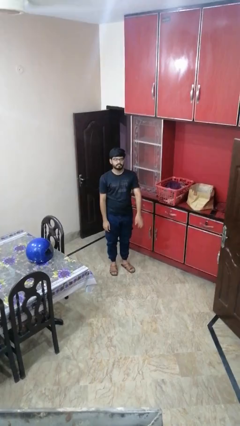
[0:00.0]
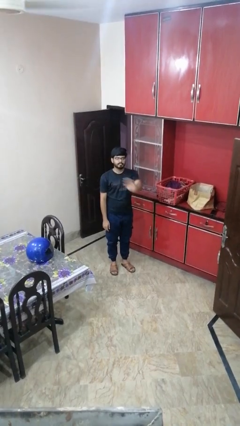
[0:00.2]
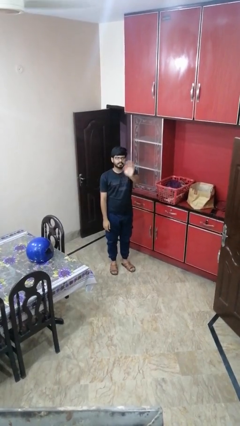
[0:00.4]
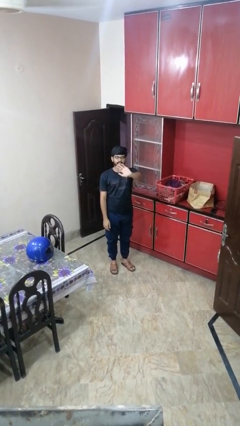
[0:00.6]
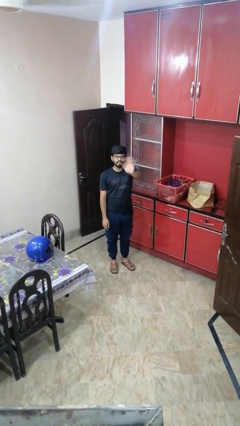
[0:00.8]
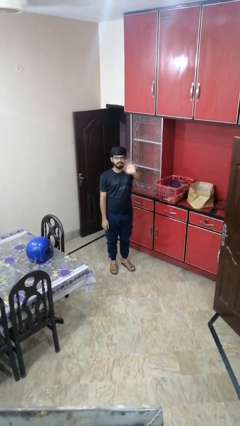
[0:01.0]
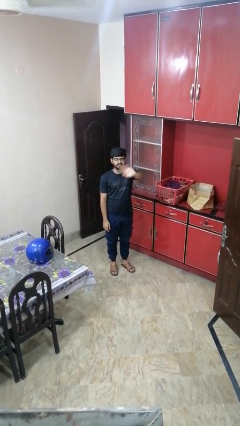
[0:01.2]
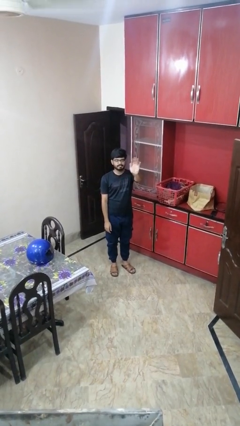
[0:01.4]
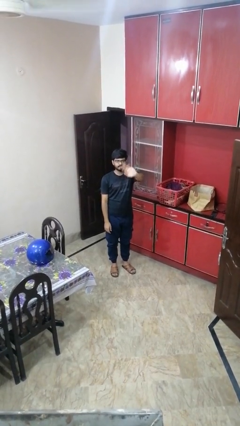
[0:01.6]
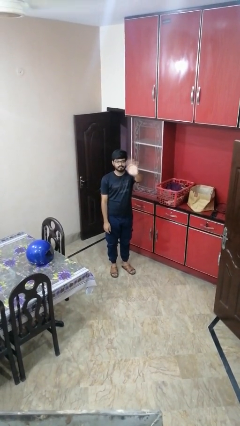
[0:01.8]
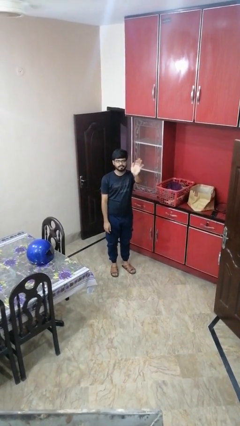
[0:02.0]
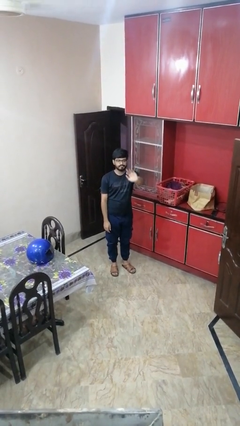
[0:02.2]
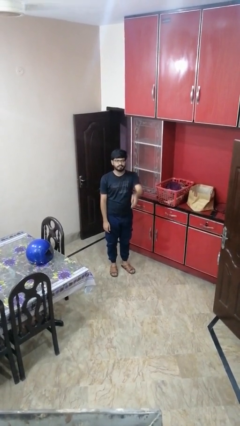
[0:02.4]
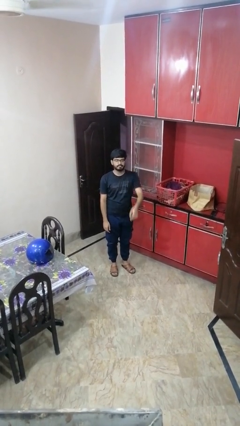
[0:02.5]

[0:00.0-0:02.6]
person waves at person

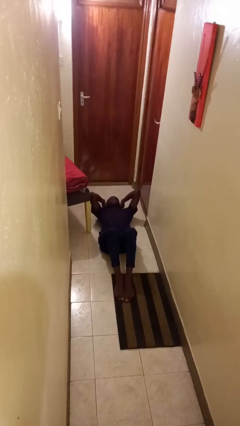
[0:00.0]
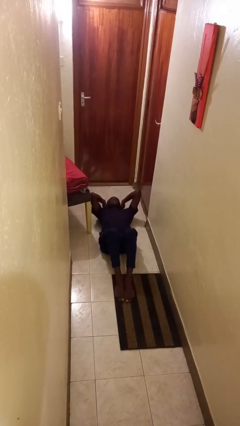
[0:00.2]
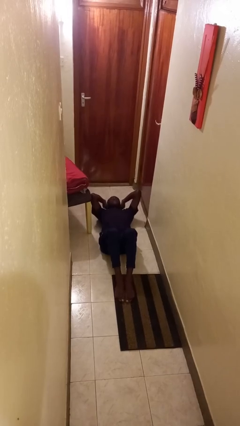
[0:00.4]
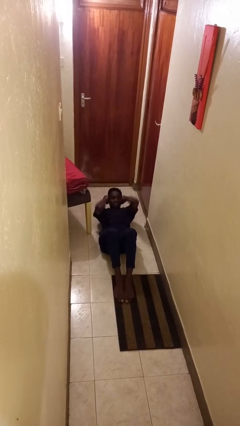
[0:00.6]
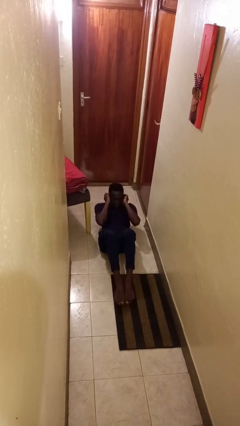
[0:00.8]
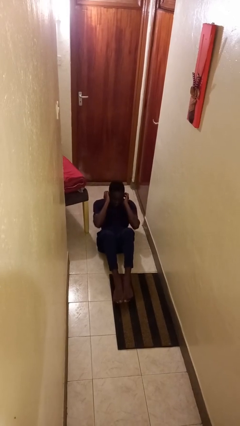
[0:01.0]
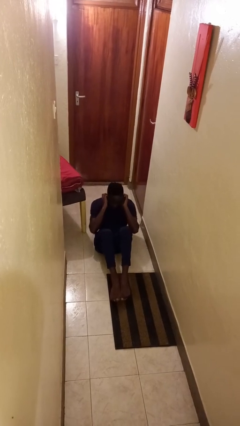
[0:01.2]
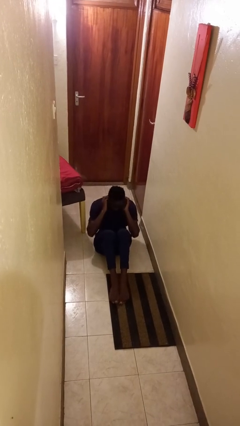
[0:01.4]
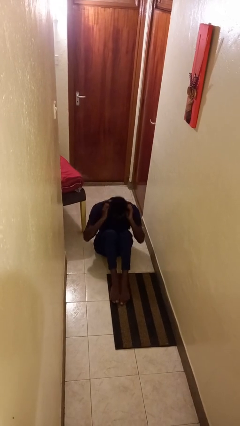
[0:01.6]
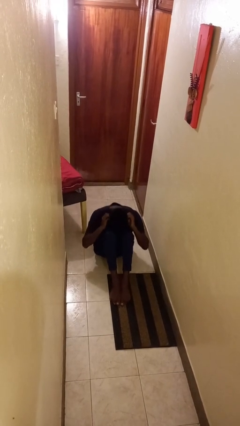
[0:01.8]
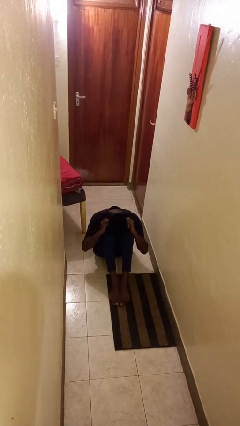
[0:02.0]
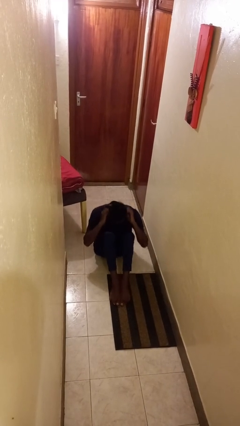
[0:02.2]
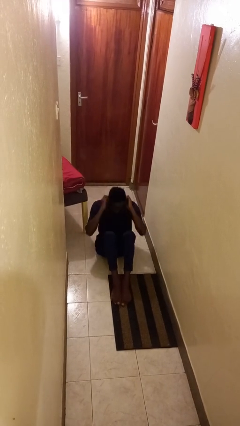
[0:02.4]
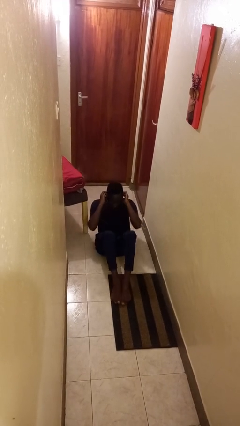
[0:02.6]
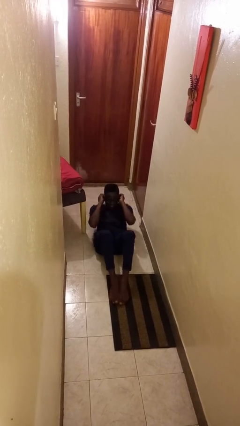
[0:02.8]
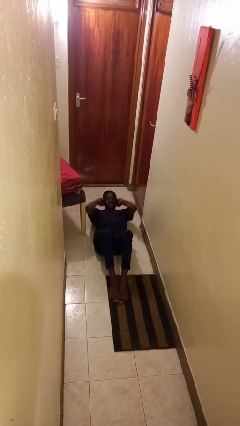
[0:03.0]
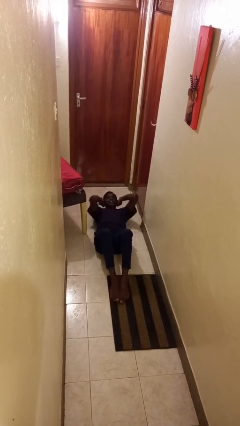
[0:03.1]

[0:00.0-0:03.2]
person exercises with situp

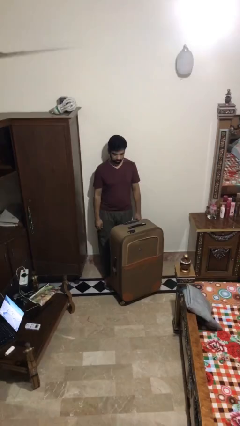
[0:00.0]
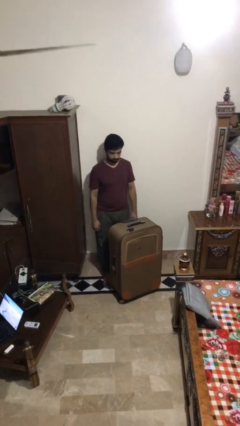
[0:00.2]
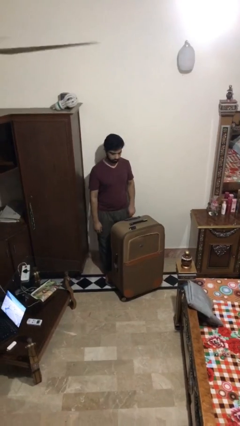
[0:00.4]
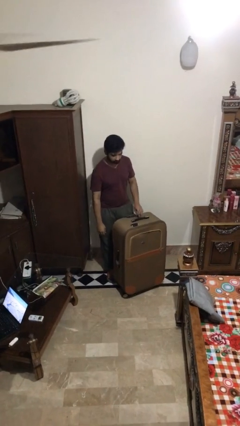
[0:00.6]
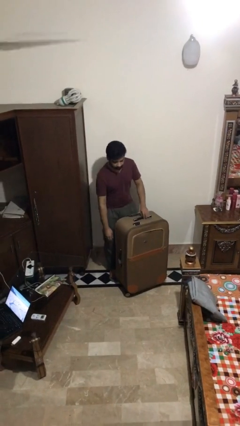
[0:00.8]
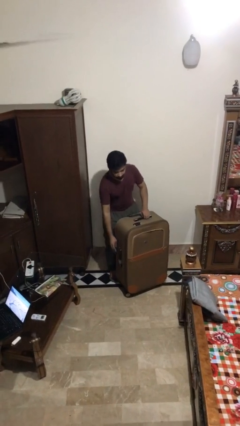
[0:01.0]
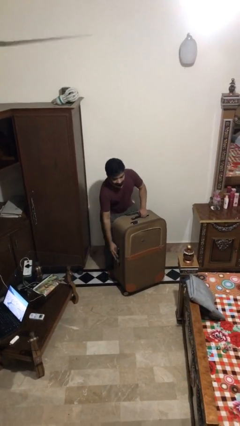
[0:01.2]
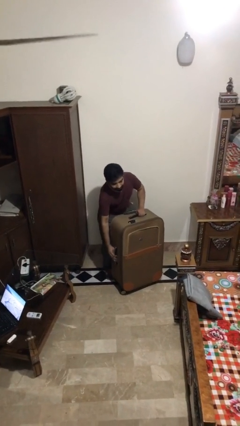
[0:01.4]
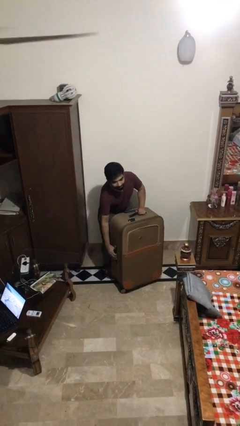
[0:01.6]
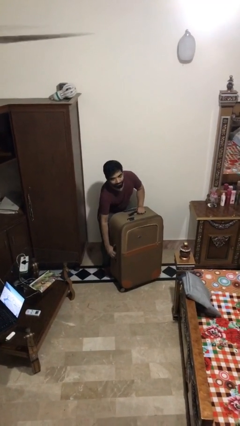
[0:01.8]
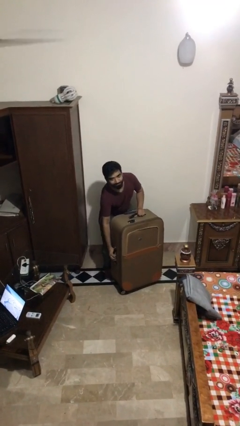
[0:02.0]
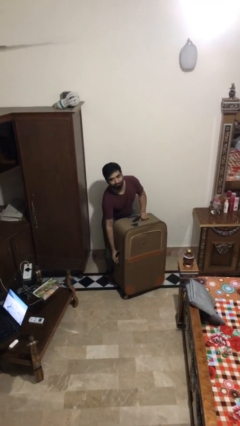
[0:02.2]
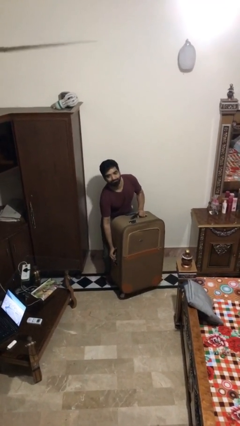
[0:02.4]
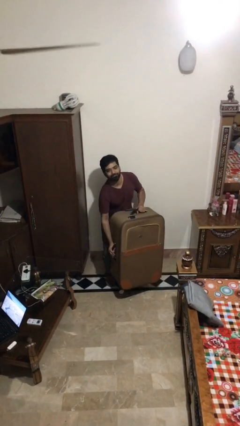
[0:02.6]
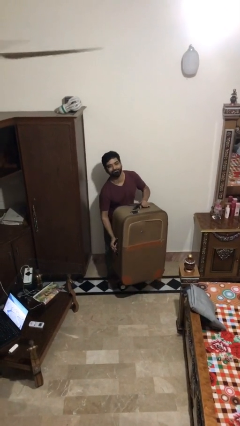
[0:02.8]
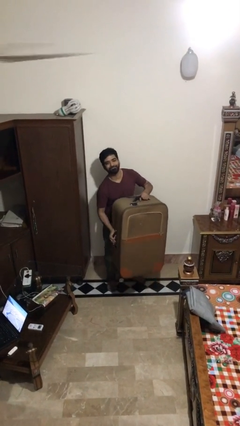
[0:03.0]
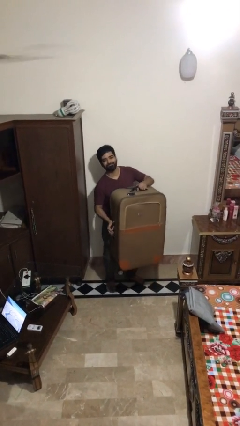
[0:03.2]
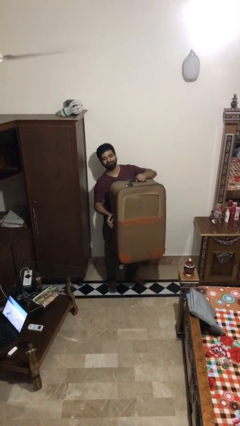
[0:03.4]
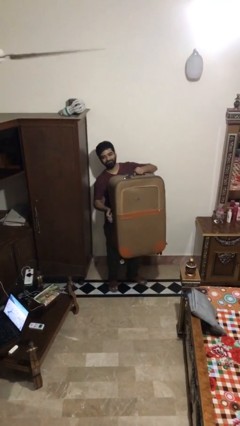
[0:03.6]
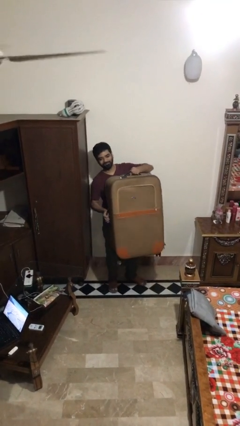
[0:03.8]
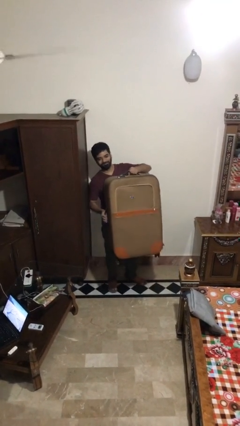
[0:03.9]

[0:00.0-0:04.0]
person picks up object from floor

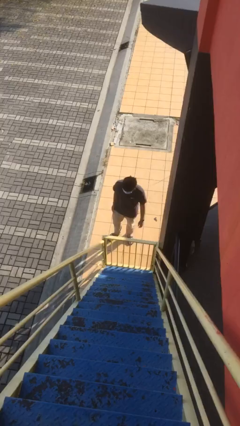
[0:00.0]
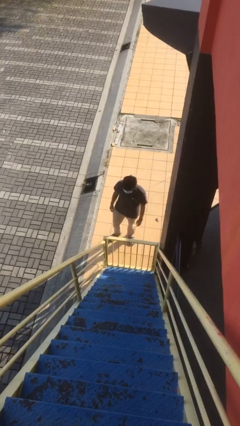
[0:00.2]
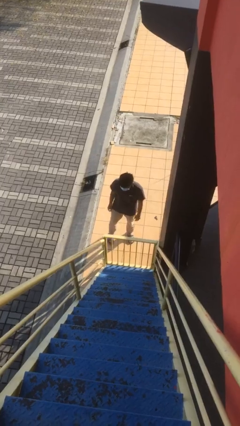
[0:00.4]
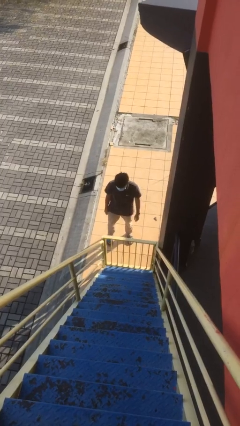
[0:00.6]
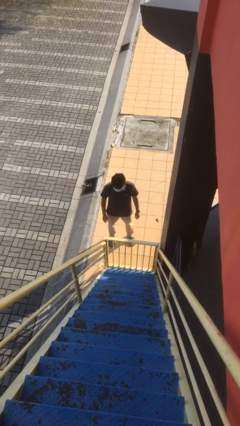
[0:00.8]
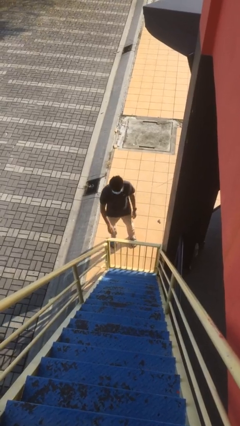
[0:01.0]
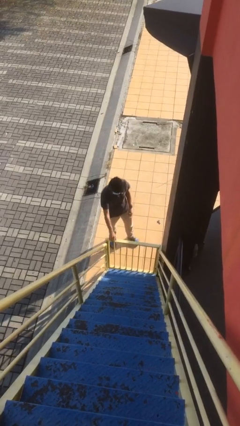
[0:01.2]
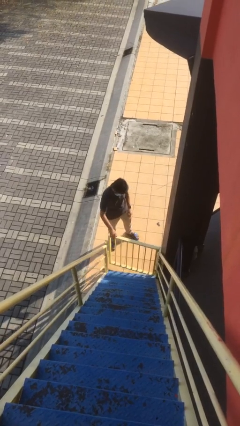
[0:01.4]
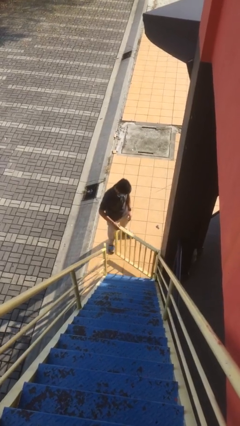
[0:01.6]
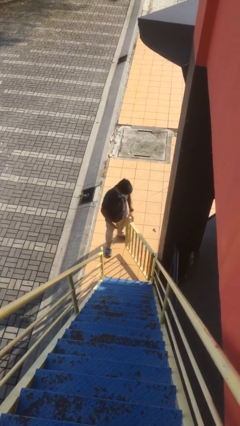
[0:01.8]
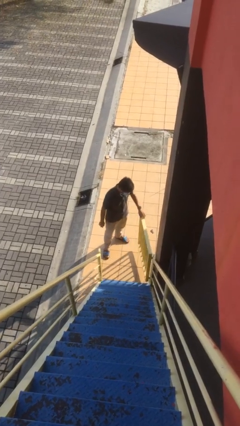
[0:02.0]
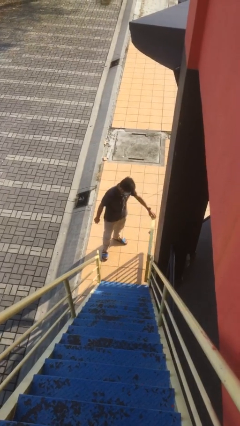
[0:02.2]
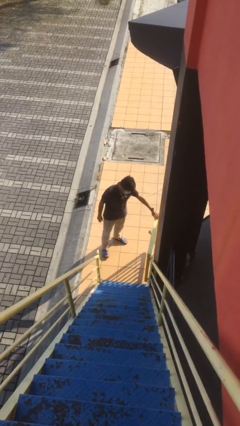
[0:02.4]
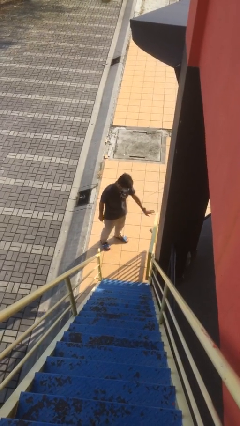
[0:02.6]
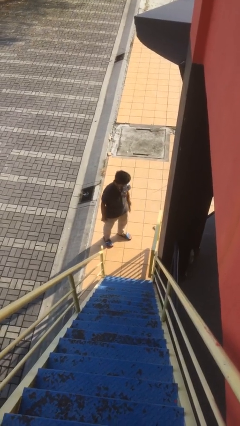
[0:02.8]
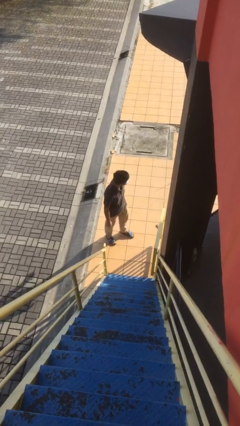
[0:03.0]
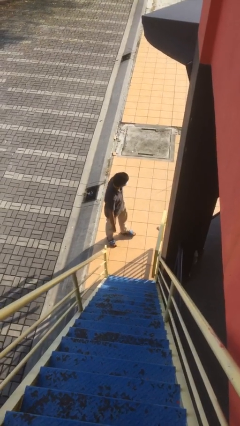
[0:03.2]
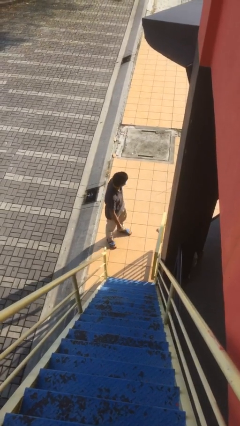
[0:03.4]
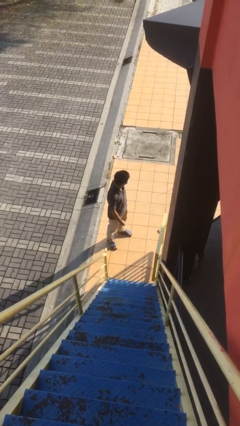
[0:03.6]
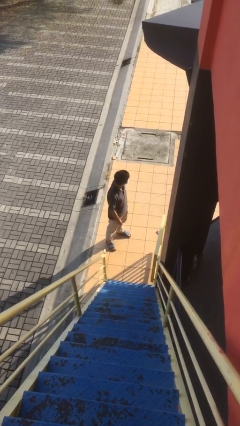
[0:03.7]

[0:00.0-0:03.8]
person opens facility door

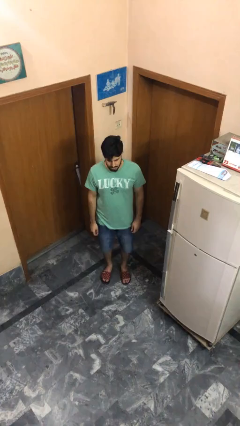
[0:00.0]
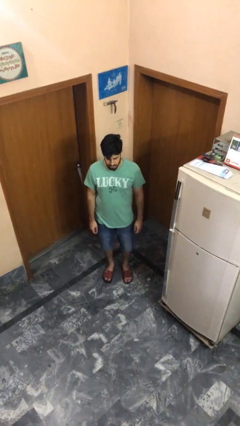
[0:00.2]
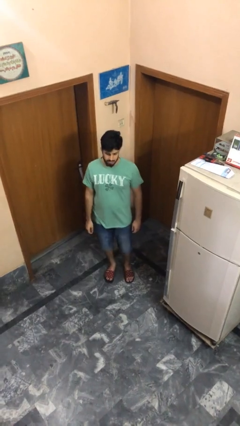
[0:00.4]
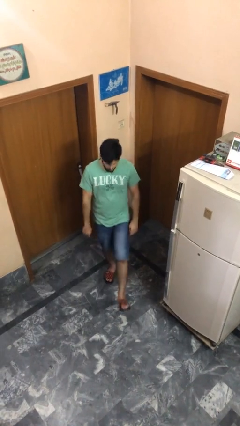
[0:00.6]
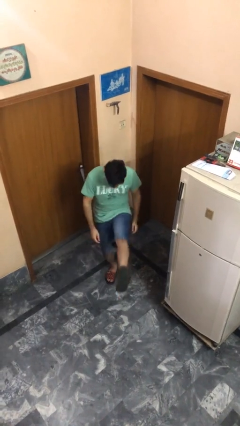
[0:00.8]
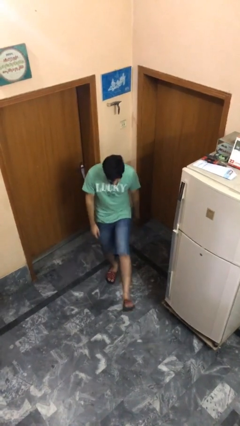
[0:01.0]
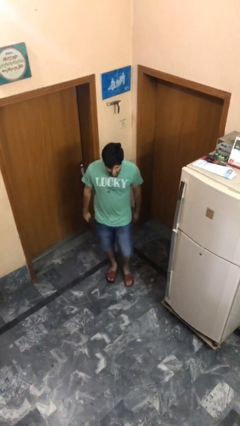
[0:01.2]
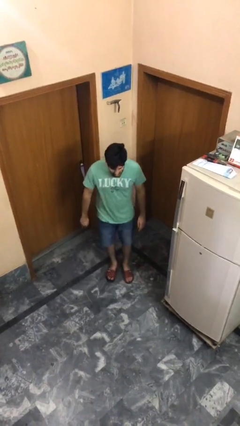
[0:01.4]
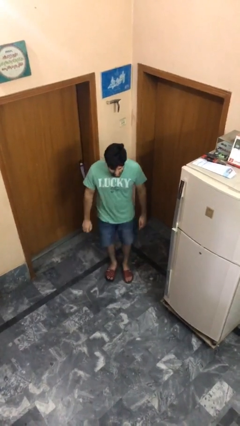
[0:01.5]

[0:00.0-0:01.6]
person karate kicks

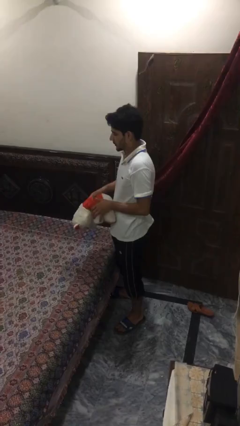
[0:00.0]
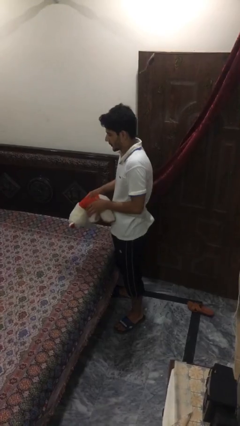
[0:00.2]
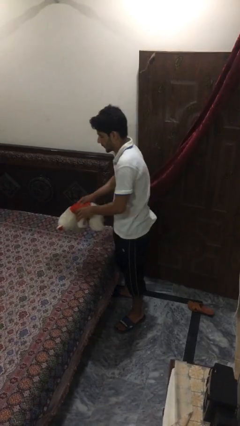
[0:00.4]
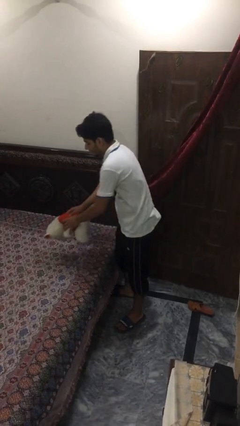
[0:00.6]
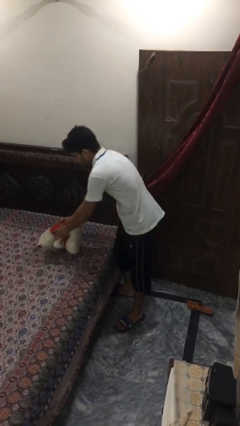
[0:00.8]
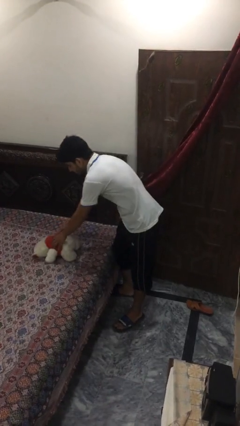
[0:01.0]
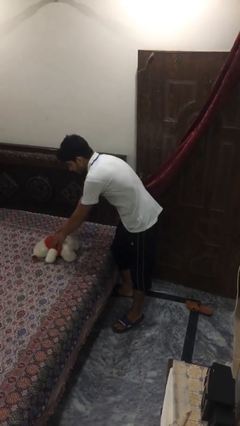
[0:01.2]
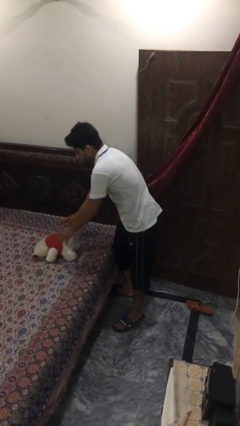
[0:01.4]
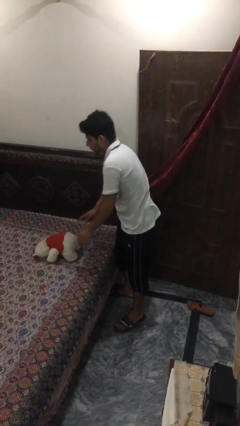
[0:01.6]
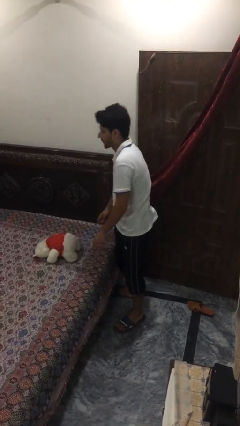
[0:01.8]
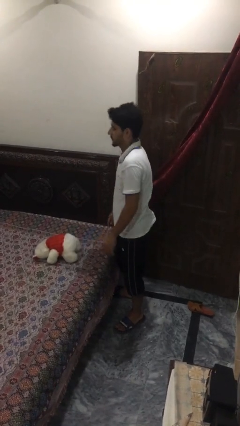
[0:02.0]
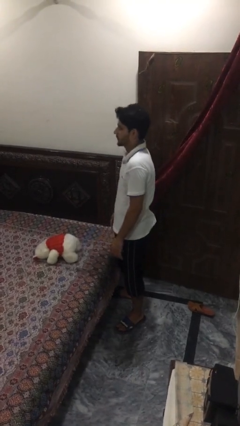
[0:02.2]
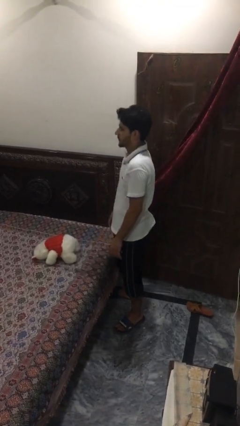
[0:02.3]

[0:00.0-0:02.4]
person puts down object on bed
